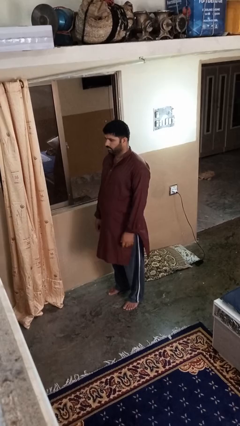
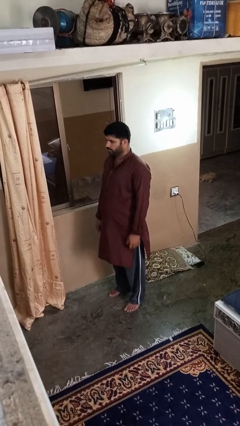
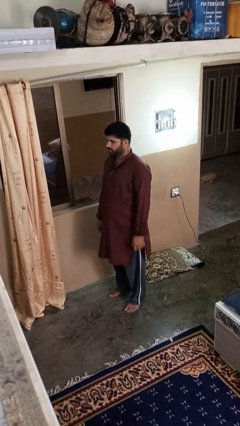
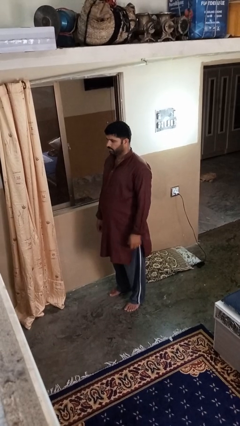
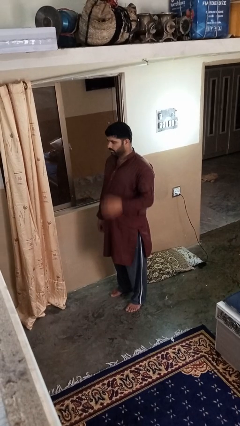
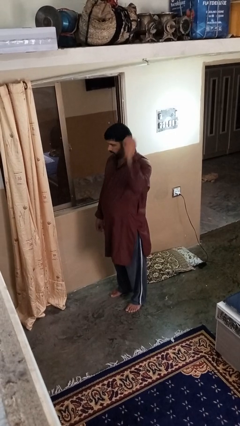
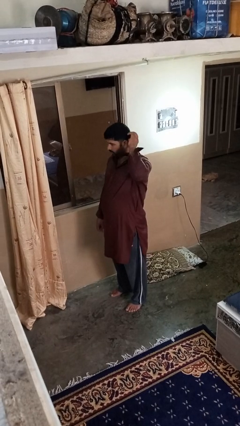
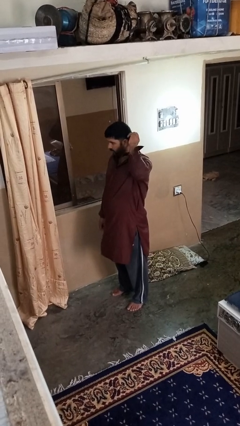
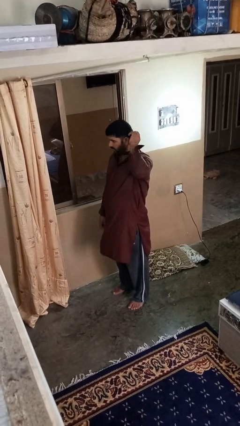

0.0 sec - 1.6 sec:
person strokes hair

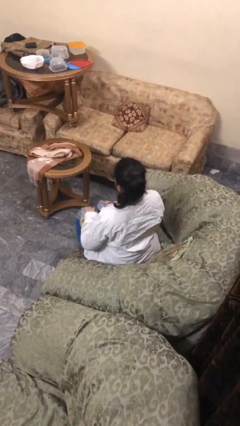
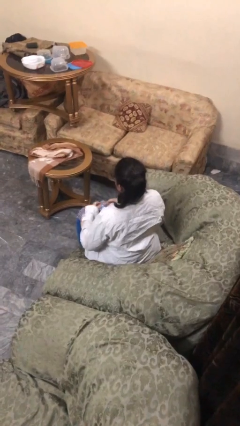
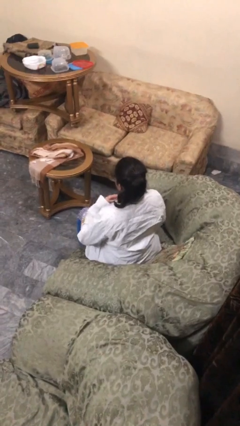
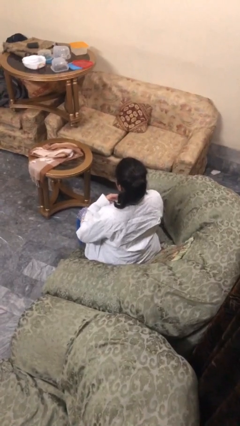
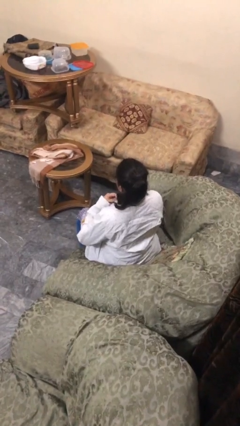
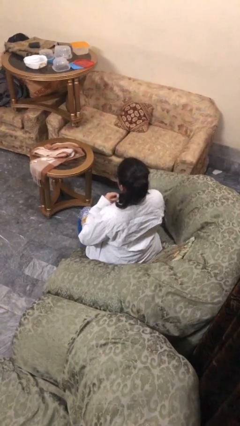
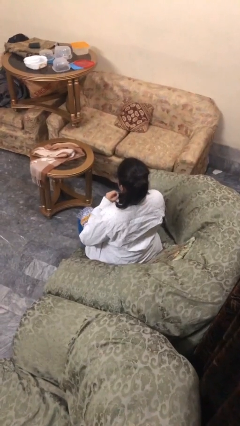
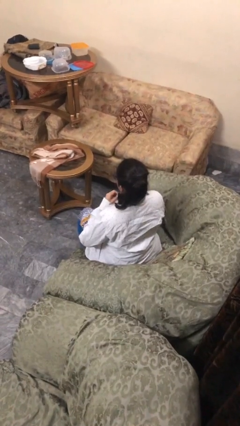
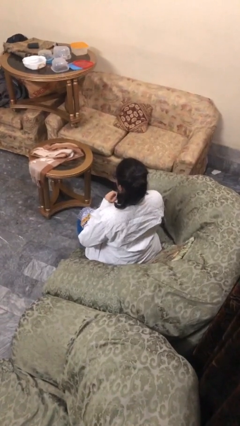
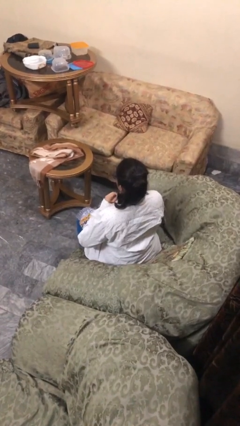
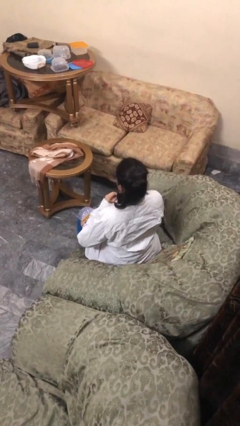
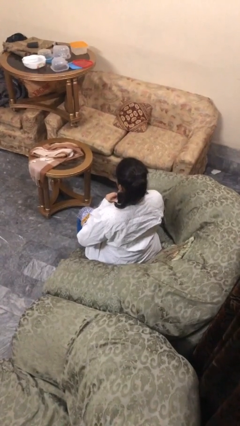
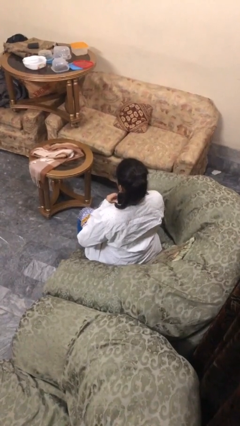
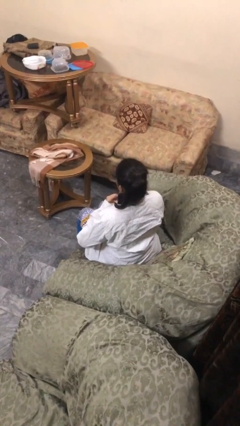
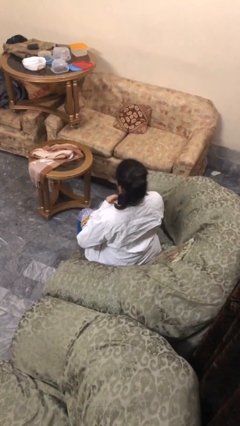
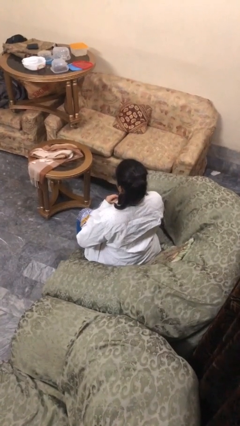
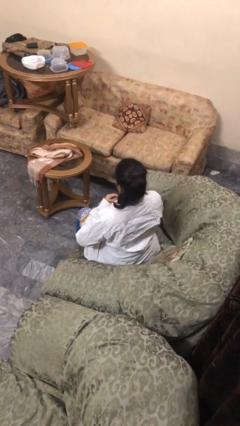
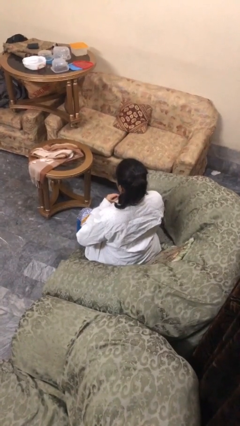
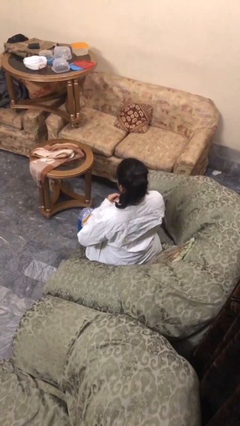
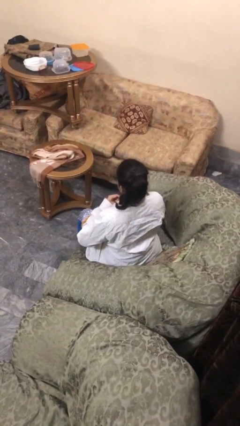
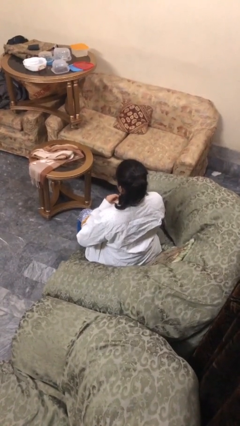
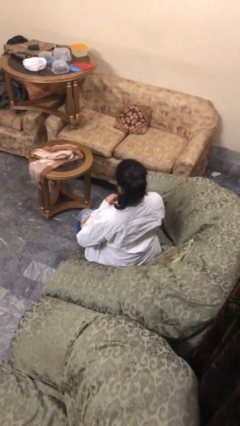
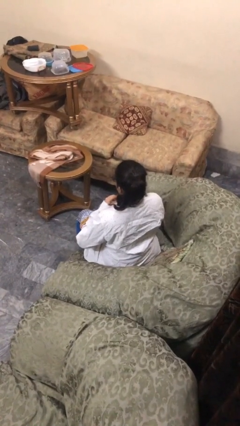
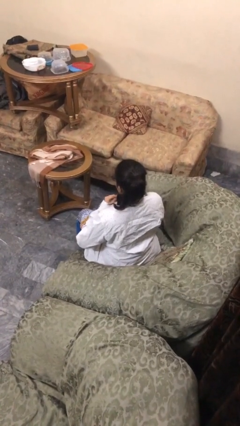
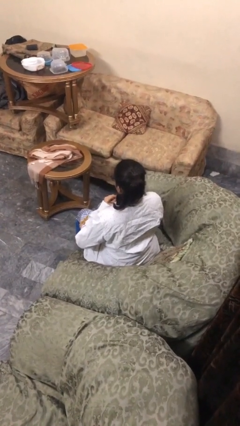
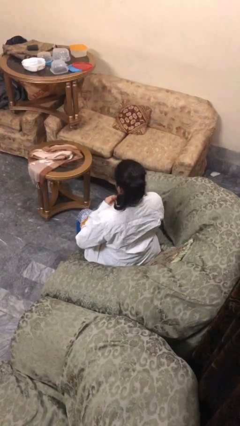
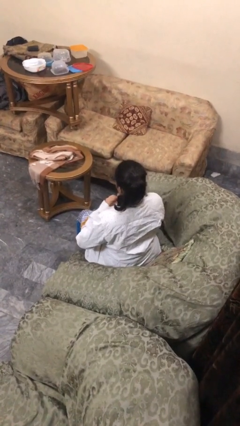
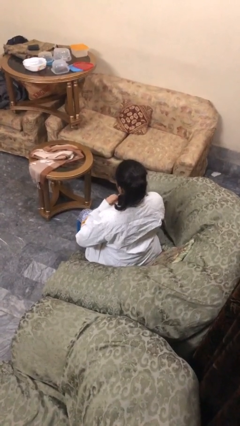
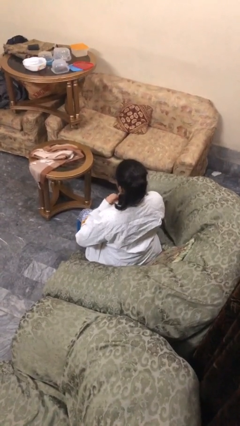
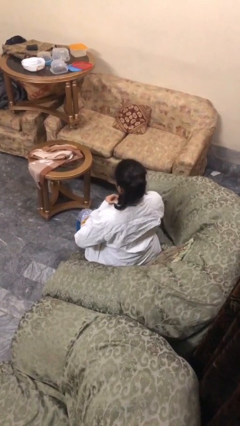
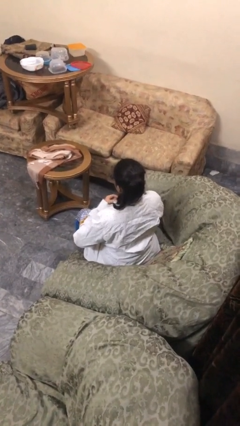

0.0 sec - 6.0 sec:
person buttons shirt

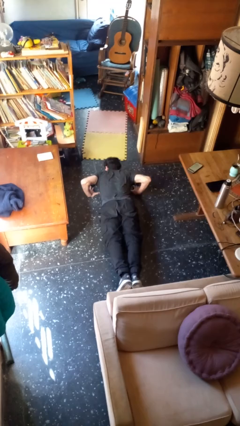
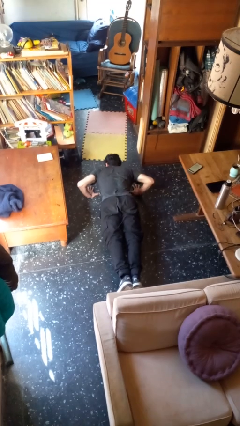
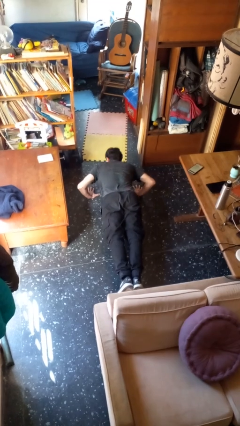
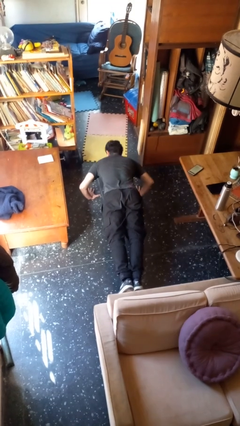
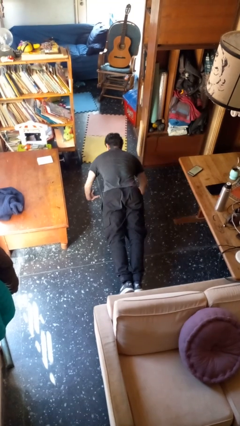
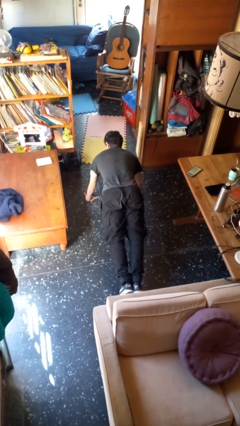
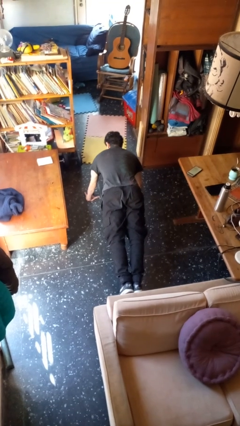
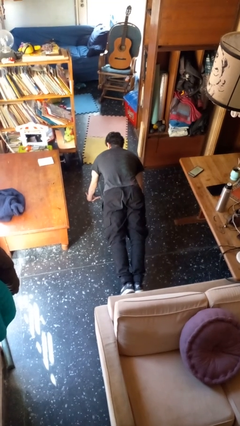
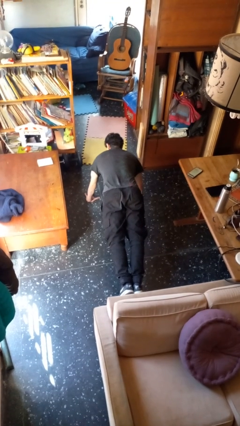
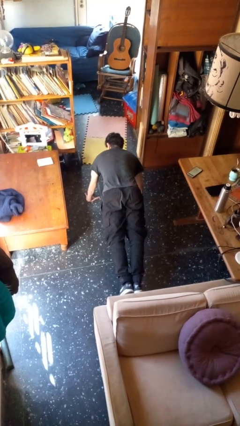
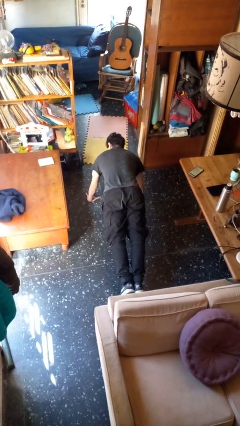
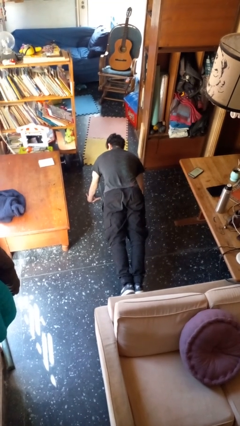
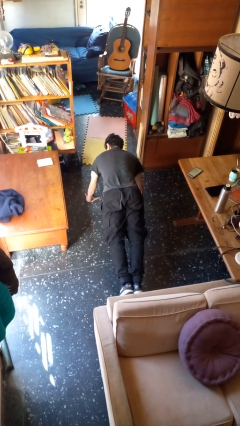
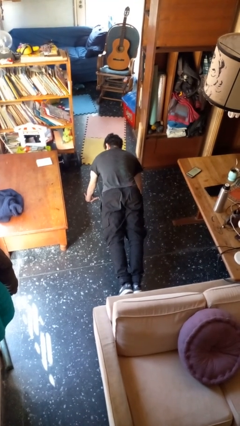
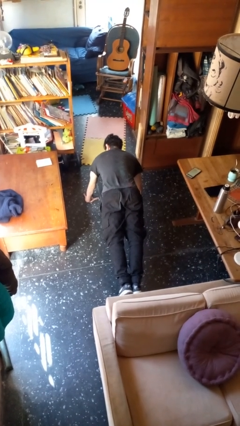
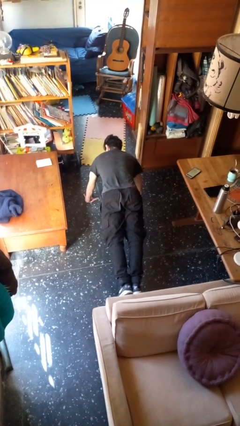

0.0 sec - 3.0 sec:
person exercises with pushup

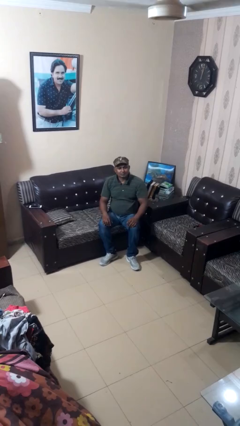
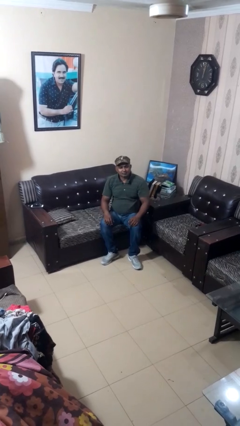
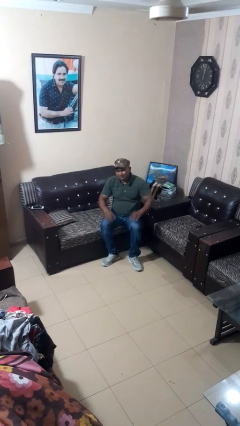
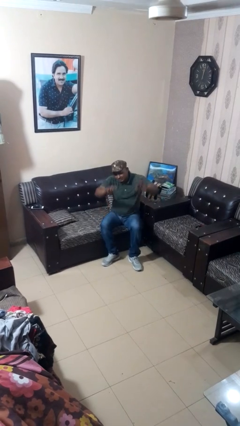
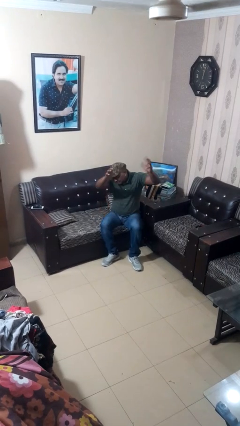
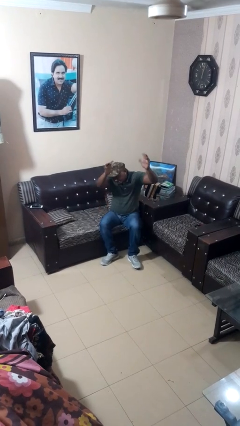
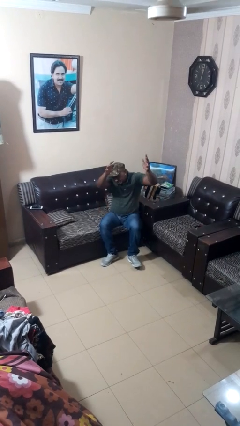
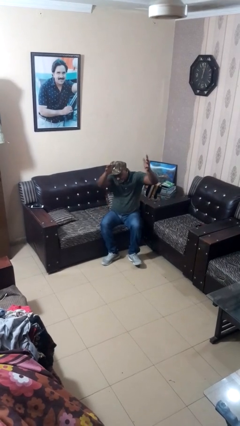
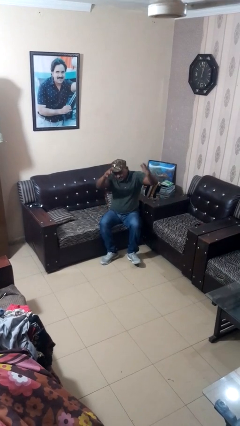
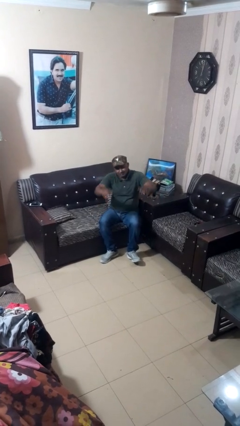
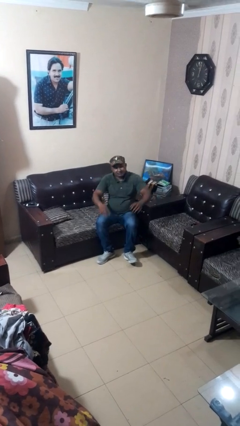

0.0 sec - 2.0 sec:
person shrugs

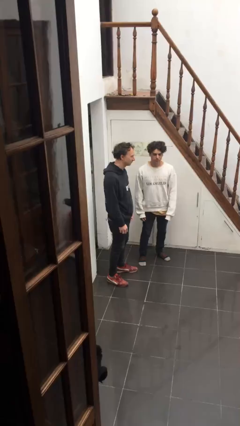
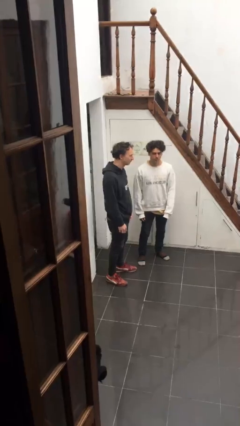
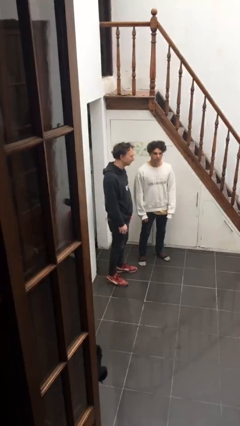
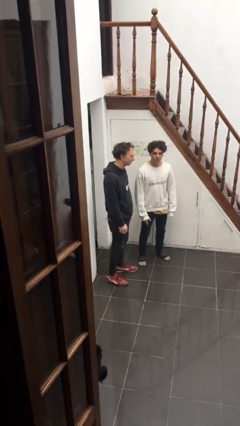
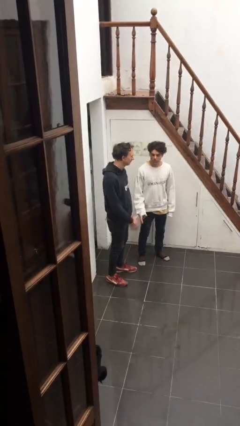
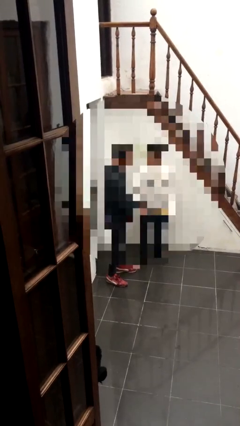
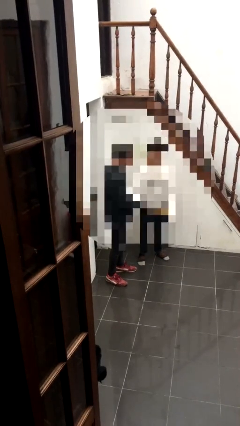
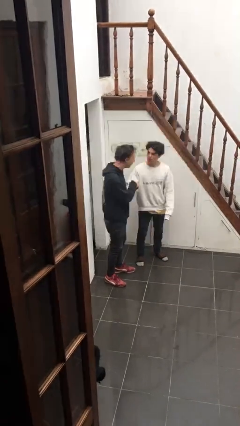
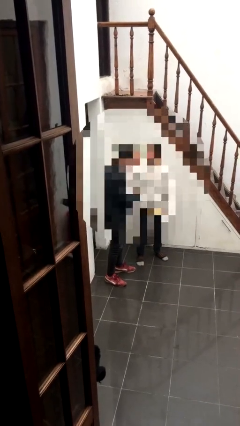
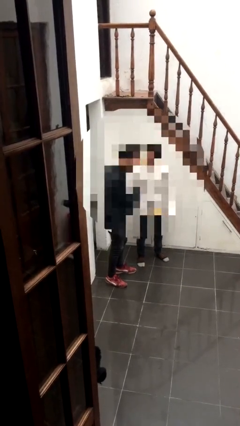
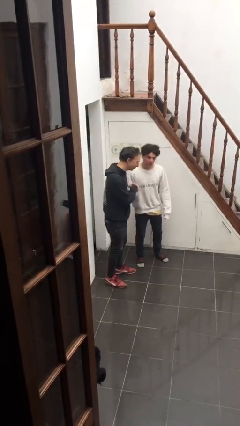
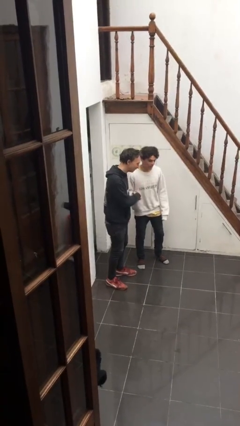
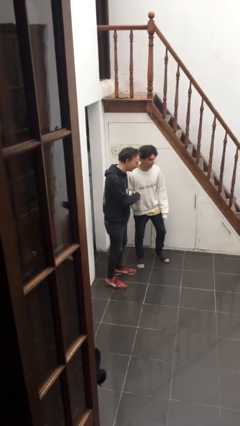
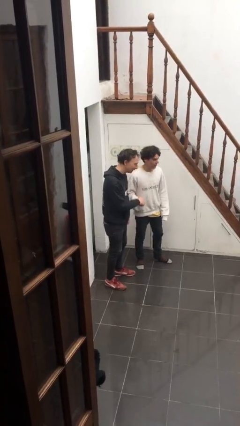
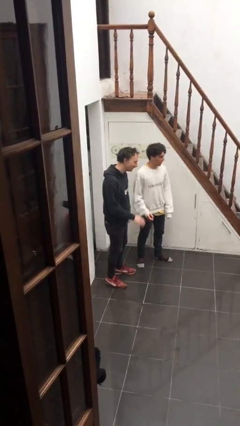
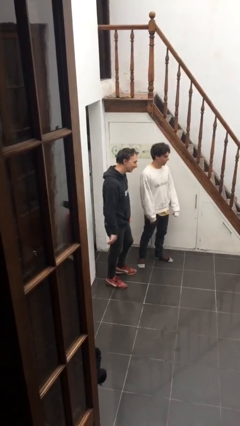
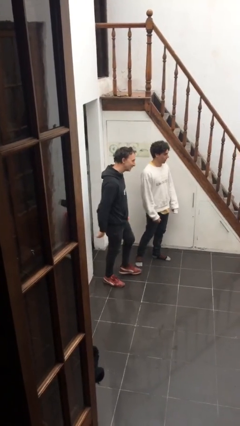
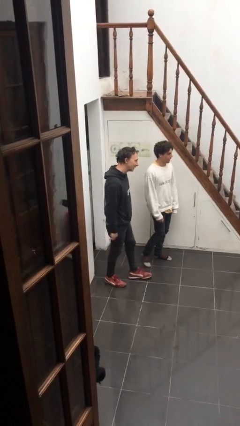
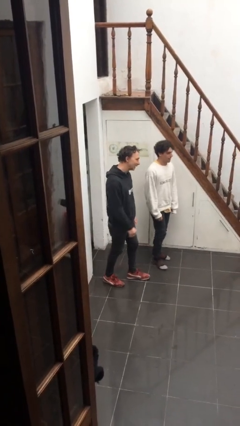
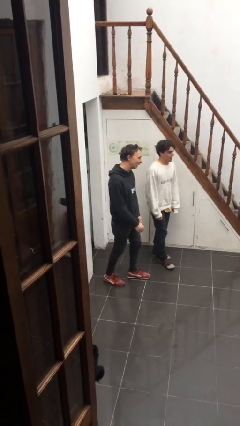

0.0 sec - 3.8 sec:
person shakes hand

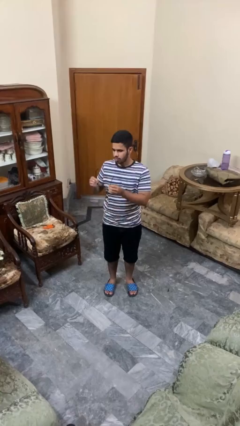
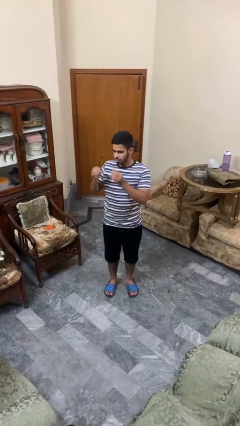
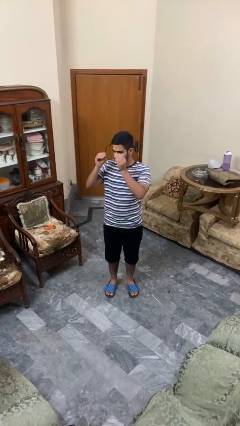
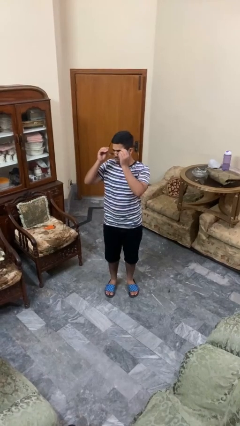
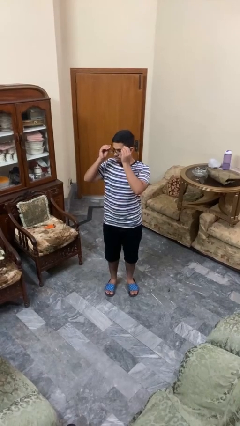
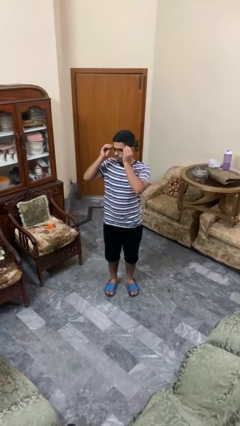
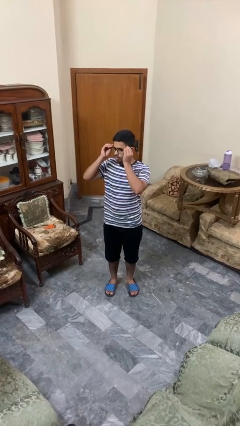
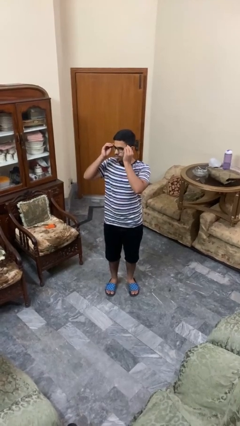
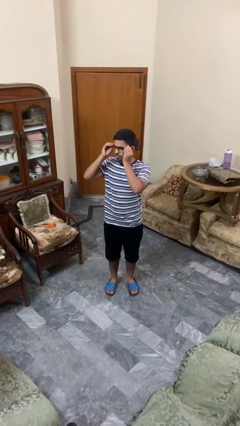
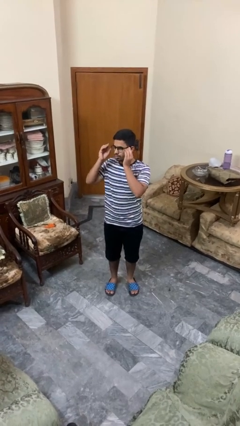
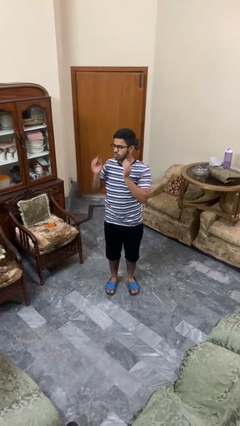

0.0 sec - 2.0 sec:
person puts on glasses
